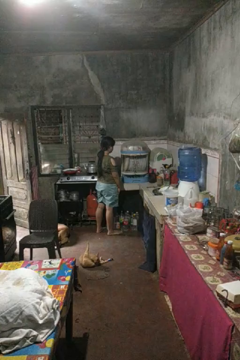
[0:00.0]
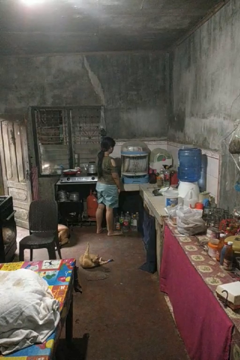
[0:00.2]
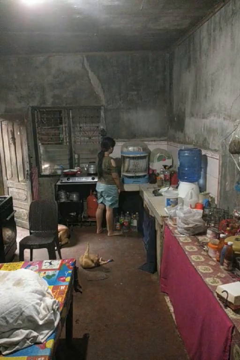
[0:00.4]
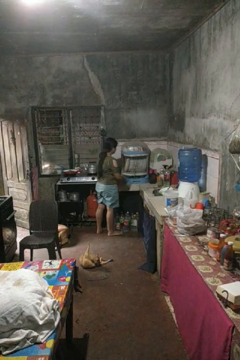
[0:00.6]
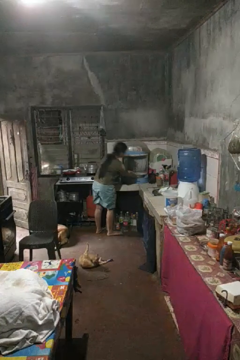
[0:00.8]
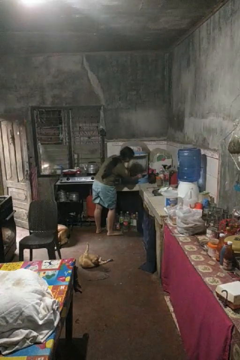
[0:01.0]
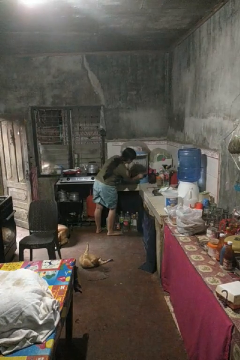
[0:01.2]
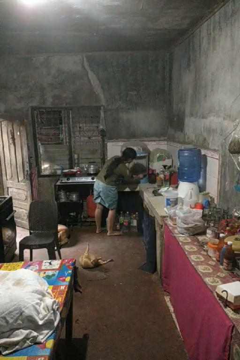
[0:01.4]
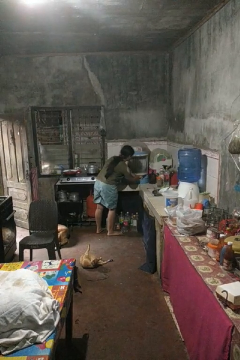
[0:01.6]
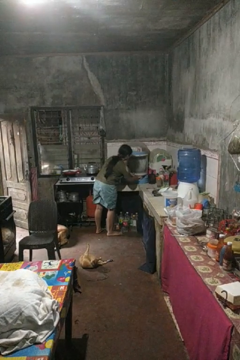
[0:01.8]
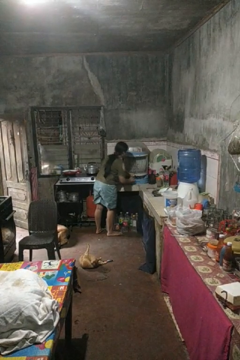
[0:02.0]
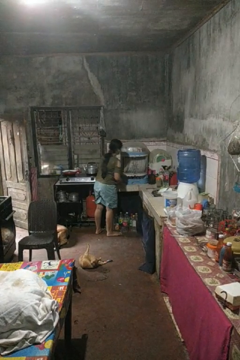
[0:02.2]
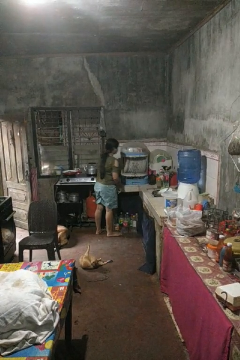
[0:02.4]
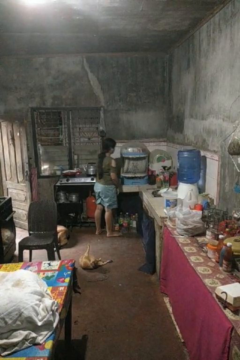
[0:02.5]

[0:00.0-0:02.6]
person searches in kitchen drawer

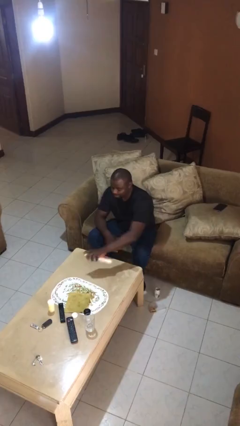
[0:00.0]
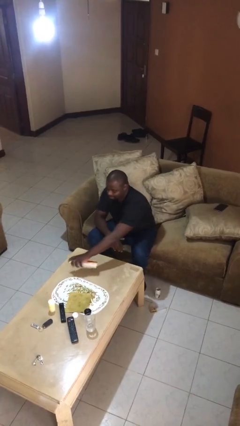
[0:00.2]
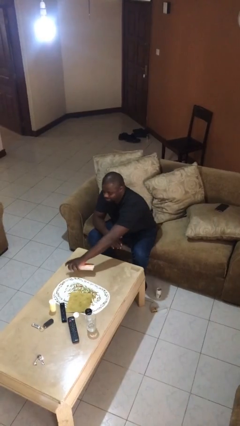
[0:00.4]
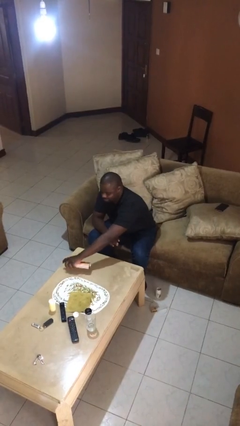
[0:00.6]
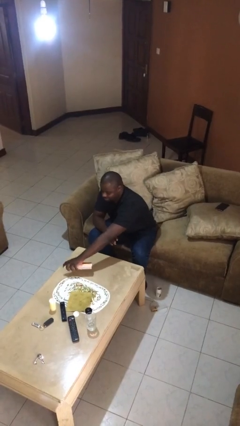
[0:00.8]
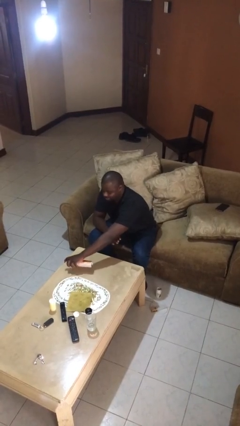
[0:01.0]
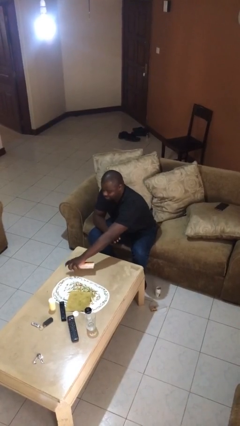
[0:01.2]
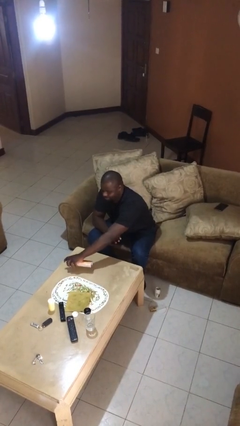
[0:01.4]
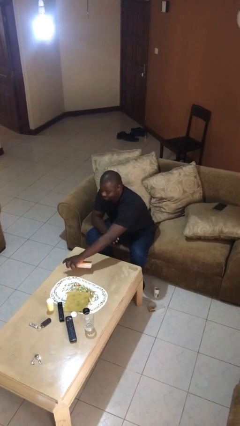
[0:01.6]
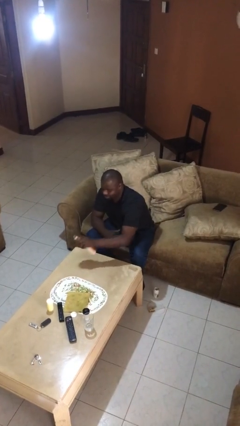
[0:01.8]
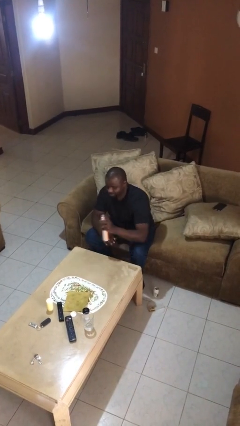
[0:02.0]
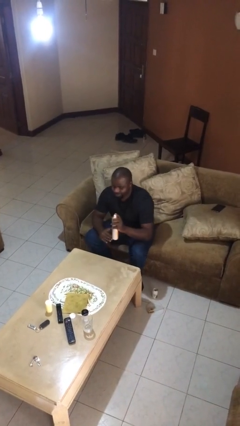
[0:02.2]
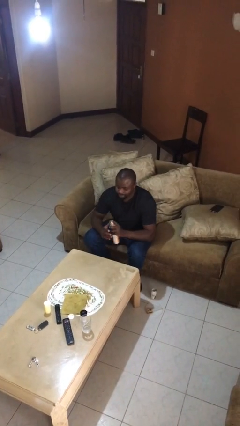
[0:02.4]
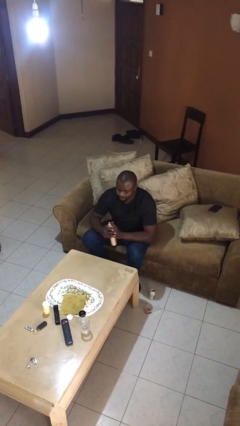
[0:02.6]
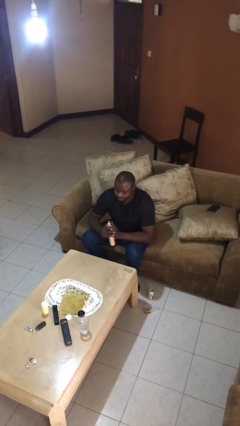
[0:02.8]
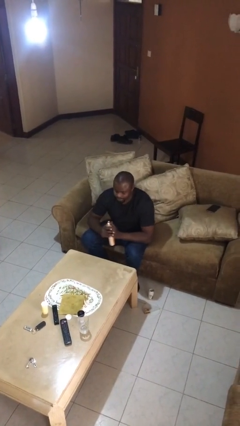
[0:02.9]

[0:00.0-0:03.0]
person sprays from bottle

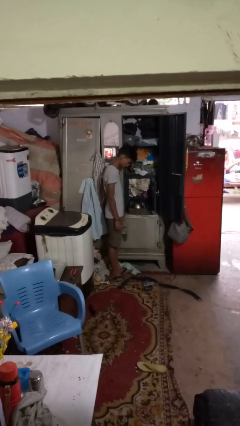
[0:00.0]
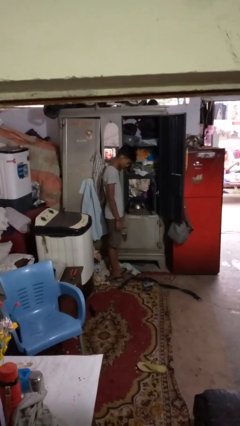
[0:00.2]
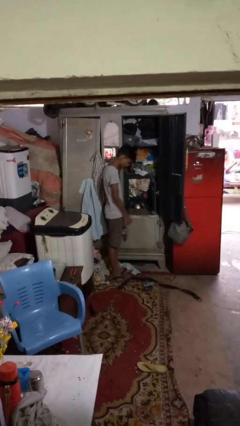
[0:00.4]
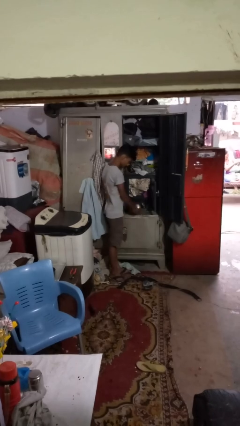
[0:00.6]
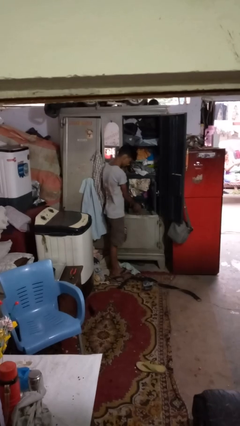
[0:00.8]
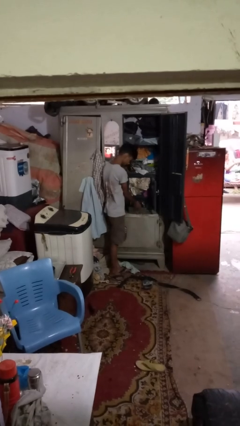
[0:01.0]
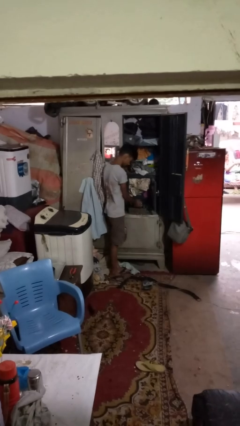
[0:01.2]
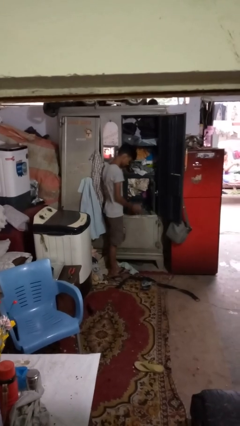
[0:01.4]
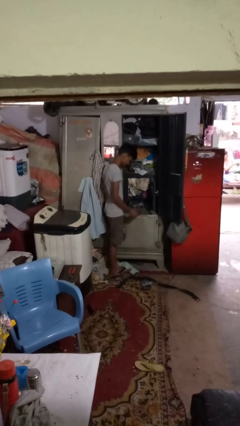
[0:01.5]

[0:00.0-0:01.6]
person takes clothes from dresser

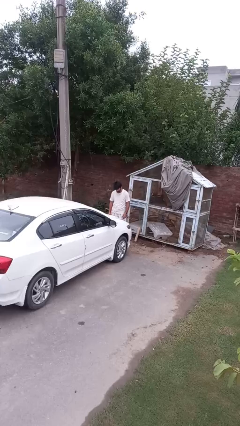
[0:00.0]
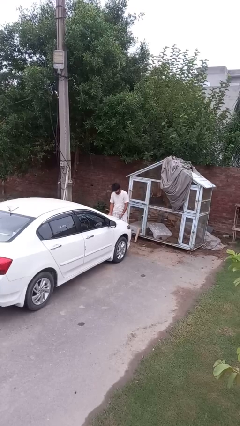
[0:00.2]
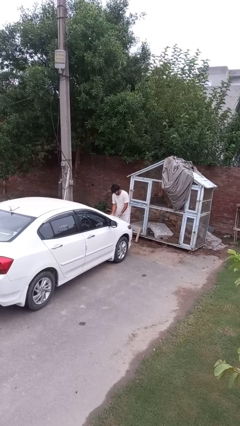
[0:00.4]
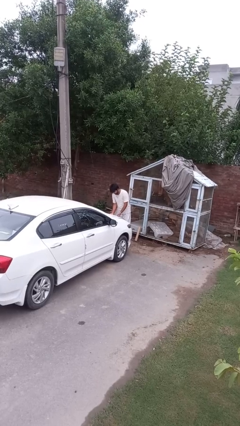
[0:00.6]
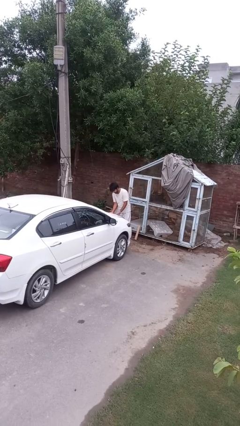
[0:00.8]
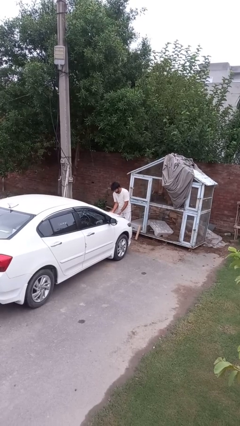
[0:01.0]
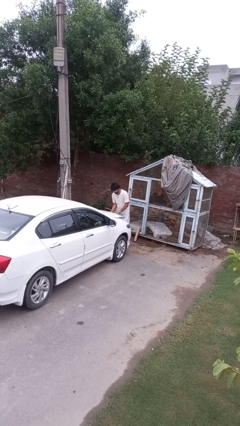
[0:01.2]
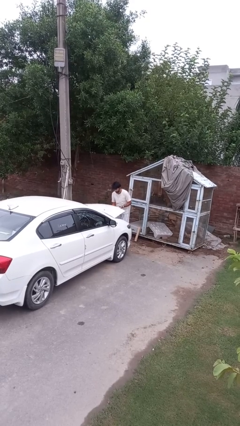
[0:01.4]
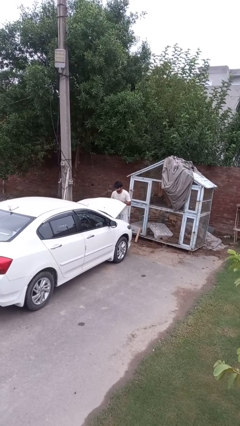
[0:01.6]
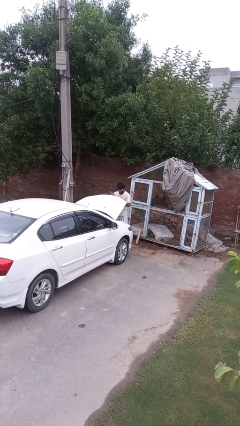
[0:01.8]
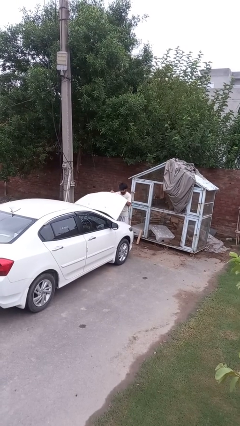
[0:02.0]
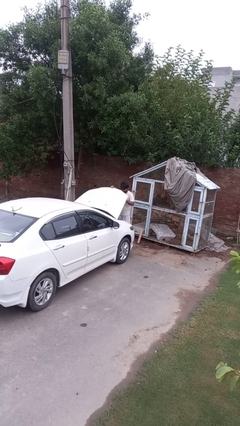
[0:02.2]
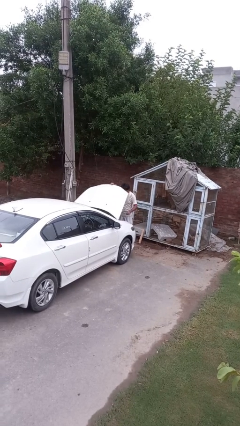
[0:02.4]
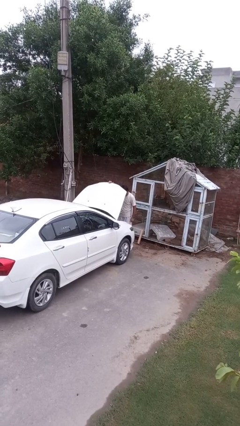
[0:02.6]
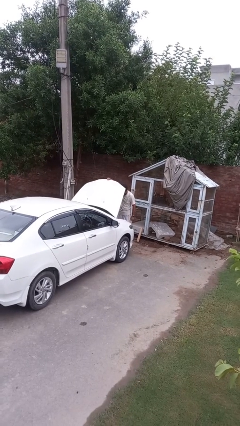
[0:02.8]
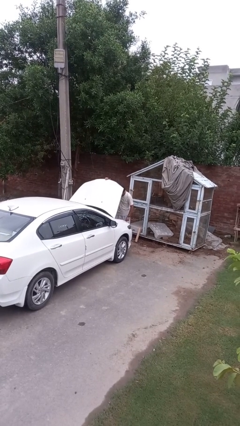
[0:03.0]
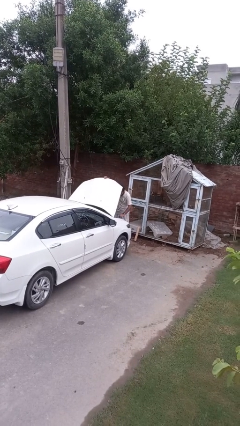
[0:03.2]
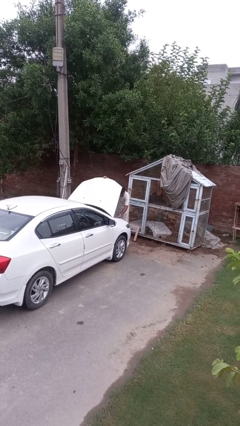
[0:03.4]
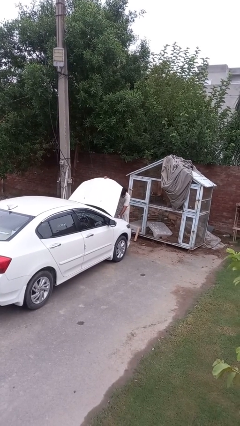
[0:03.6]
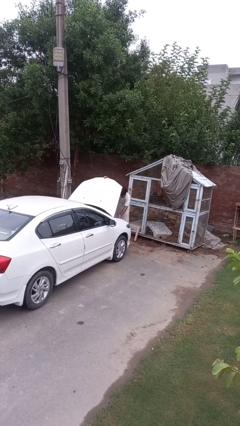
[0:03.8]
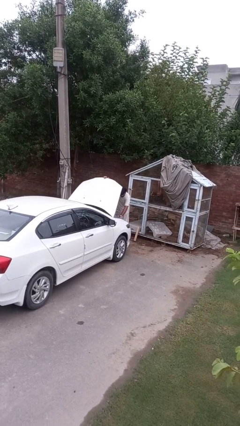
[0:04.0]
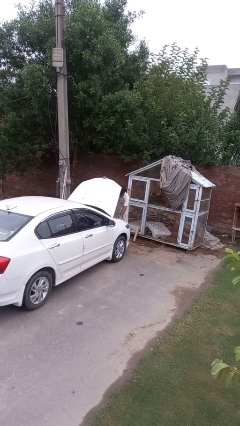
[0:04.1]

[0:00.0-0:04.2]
person opens car hood

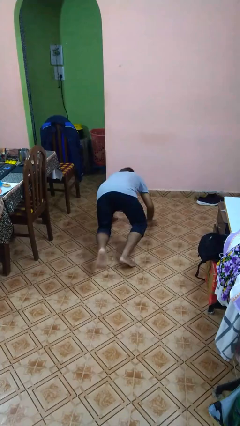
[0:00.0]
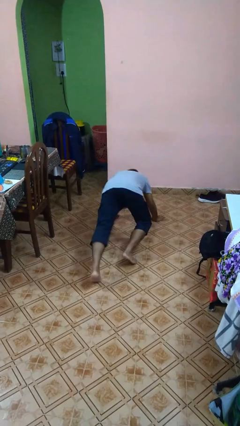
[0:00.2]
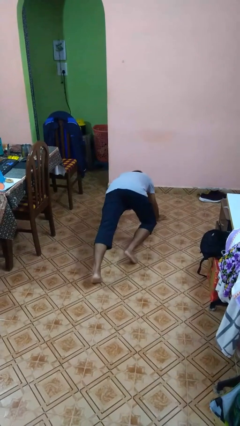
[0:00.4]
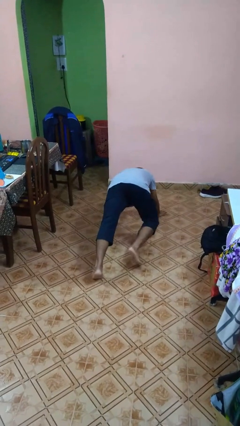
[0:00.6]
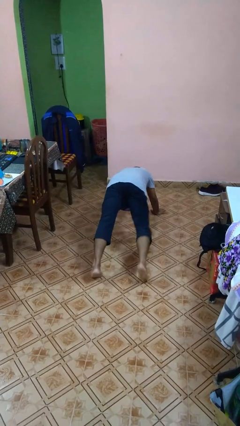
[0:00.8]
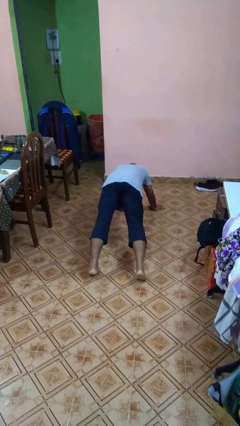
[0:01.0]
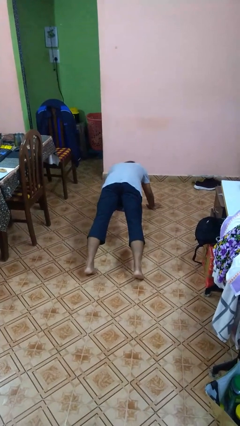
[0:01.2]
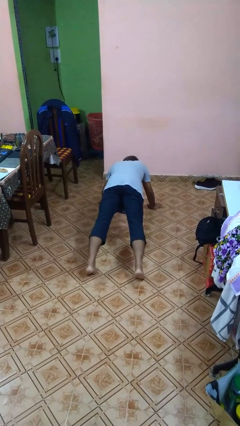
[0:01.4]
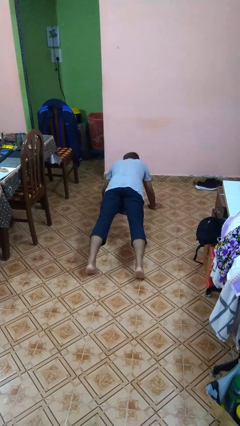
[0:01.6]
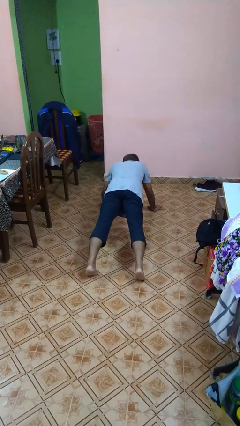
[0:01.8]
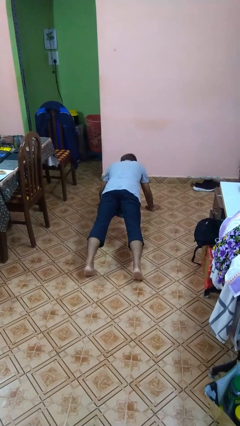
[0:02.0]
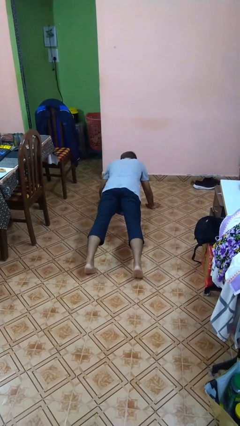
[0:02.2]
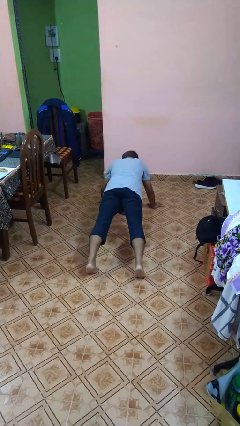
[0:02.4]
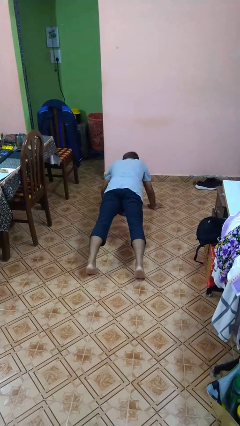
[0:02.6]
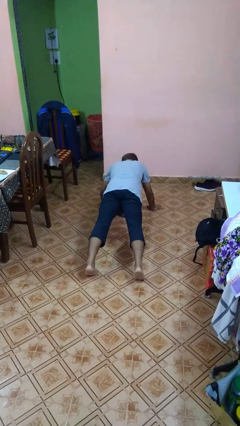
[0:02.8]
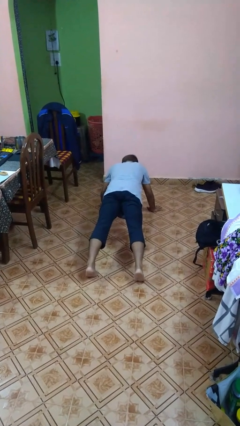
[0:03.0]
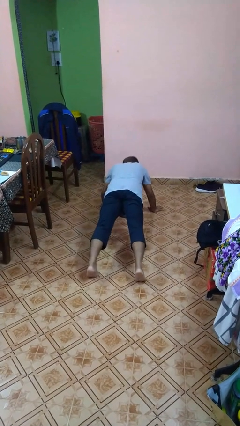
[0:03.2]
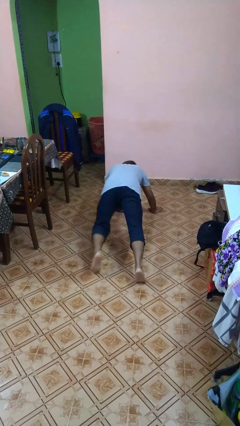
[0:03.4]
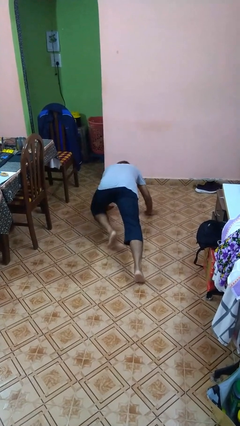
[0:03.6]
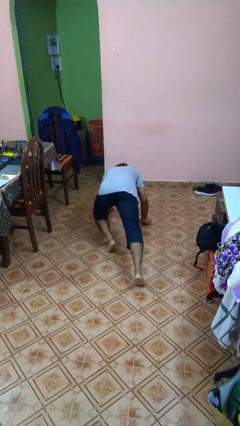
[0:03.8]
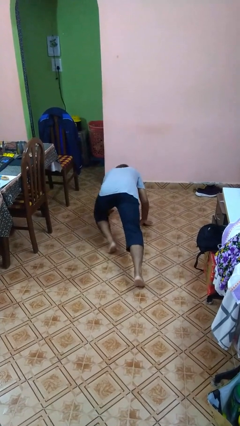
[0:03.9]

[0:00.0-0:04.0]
person exercises with plank

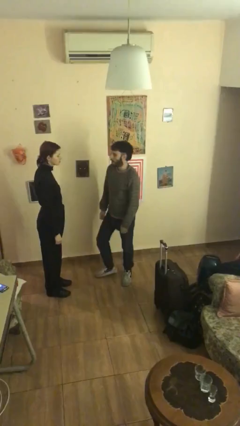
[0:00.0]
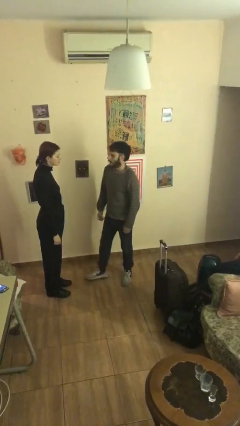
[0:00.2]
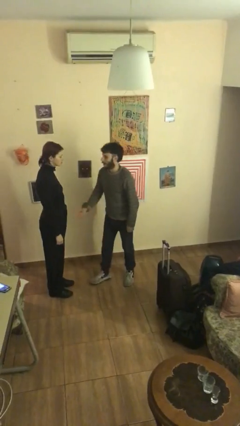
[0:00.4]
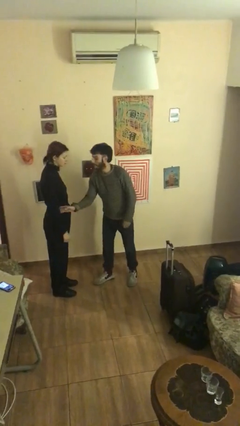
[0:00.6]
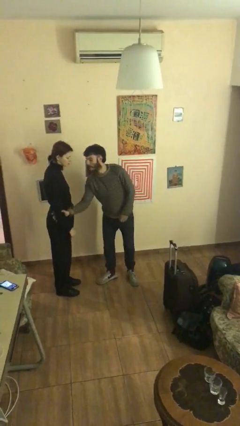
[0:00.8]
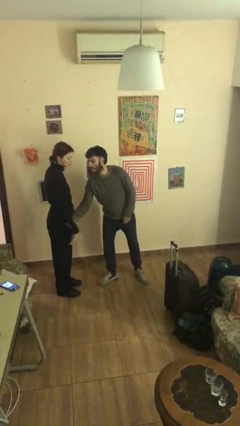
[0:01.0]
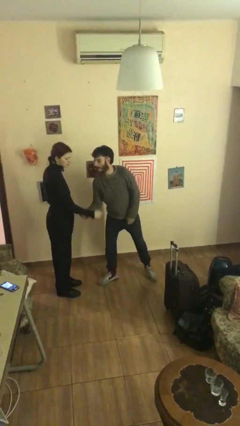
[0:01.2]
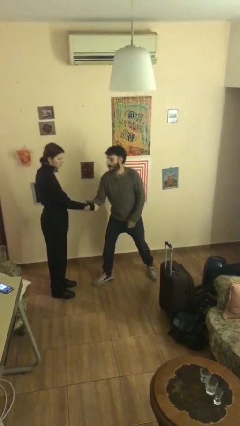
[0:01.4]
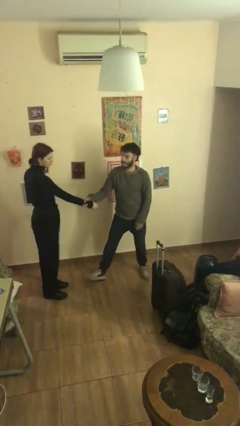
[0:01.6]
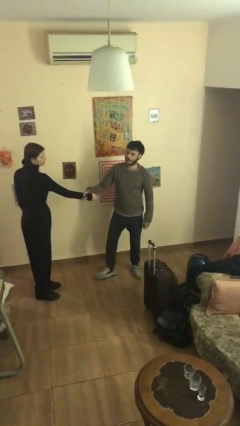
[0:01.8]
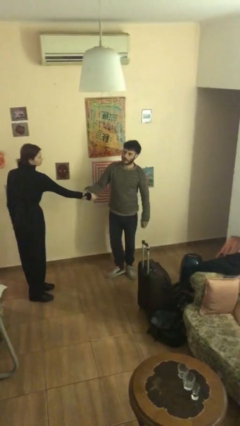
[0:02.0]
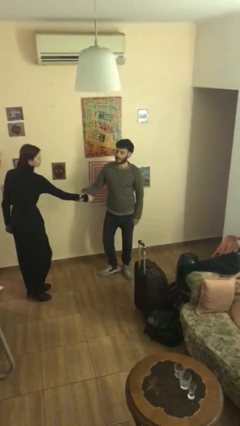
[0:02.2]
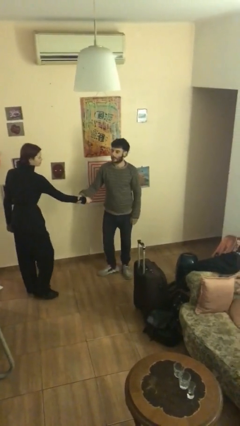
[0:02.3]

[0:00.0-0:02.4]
person grabs person by forearm

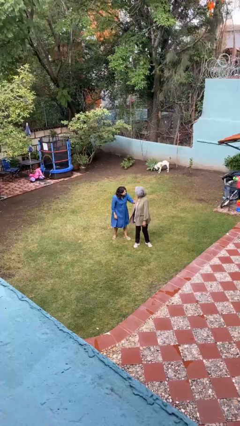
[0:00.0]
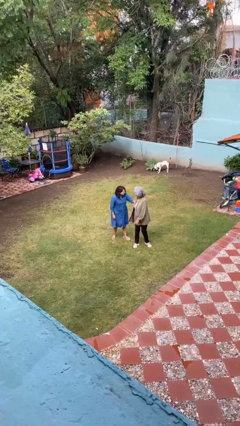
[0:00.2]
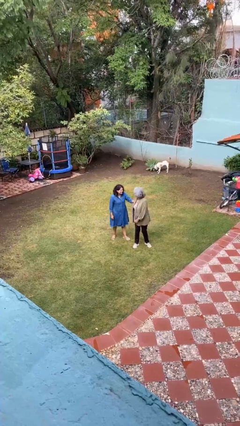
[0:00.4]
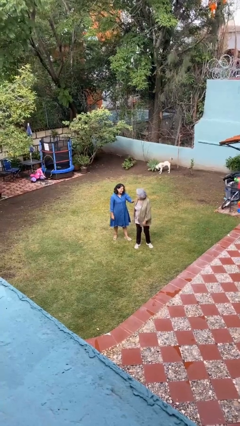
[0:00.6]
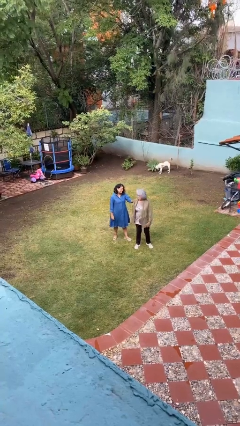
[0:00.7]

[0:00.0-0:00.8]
person spins person around
